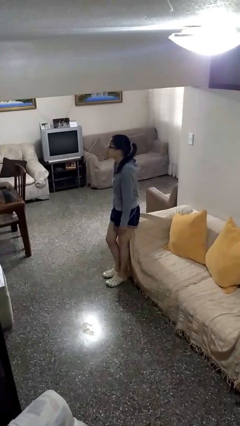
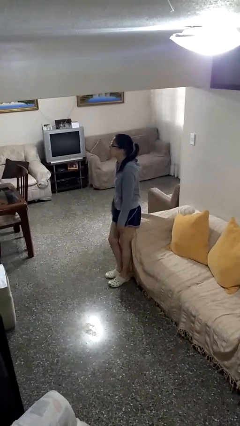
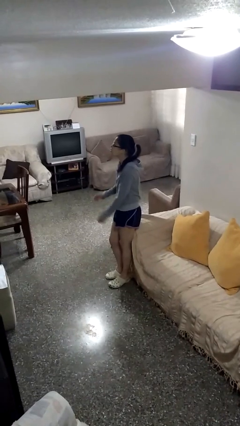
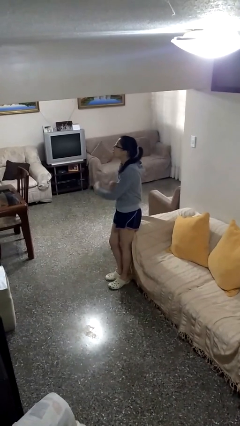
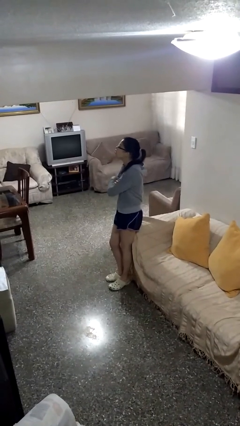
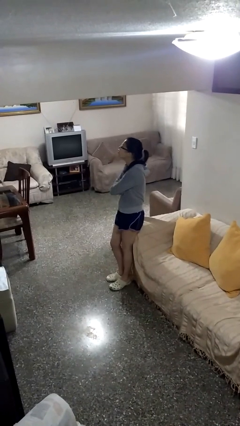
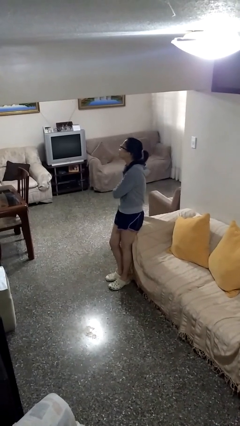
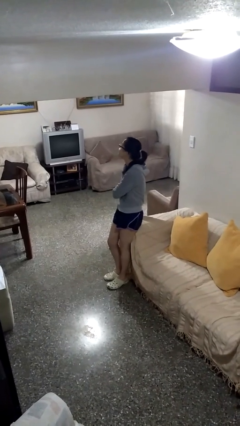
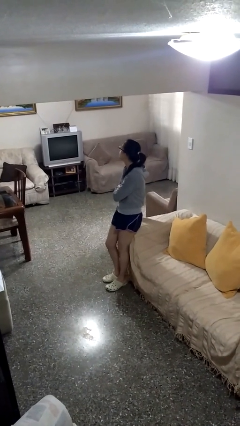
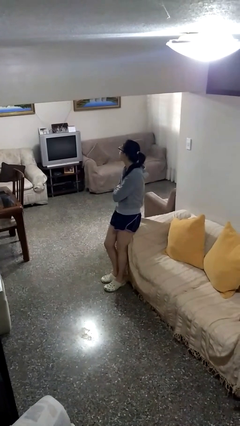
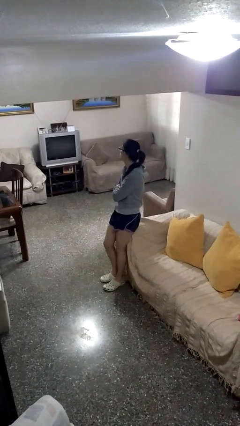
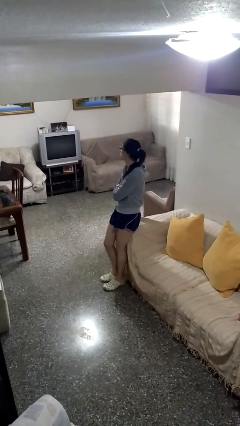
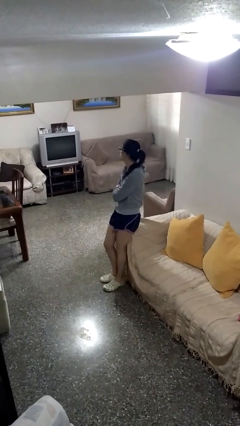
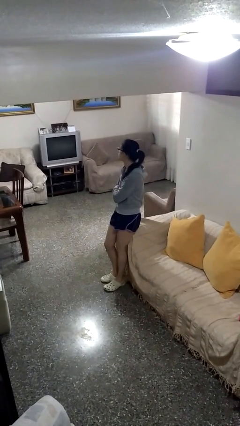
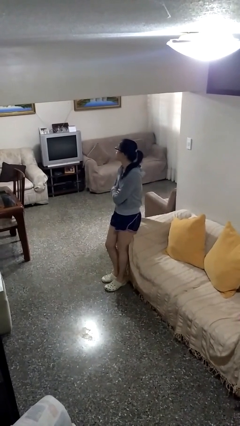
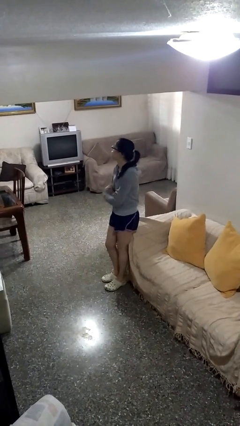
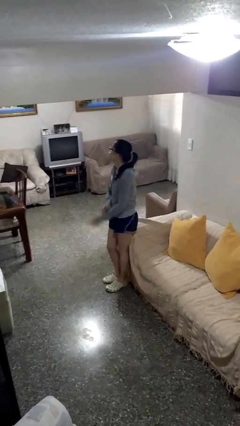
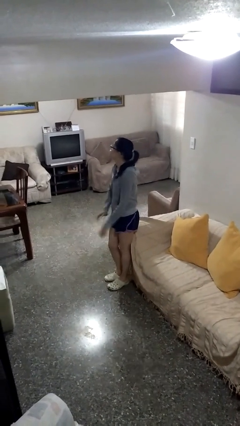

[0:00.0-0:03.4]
person crosses arms

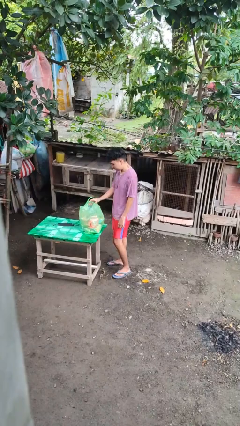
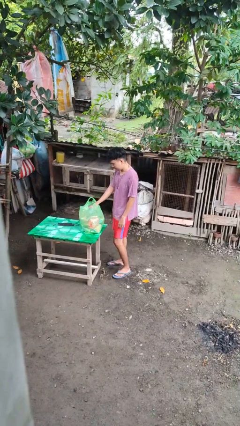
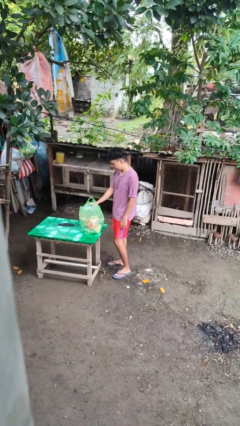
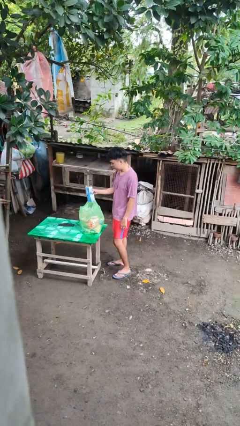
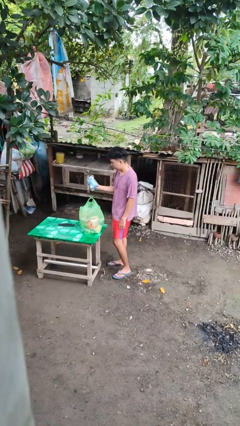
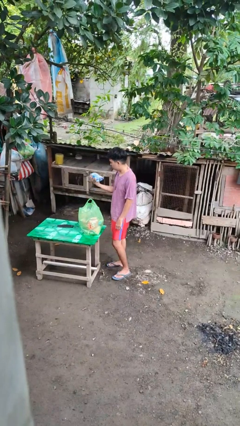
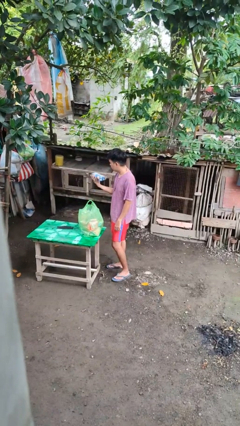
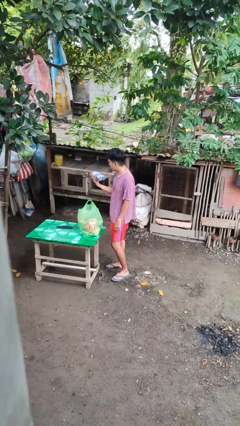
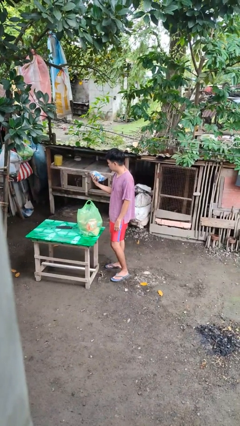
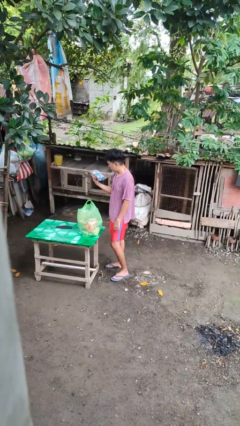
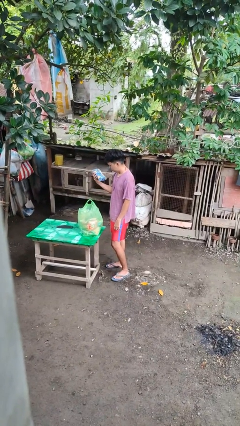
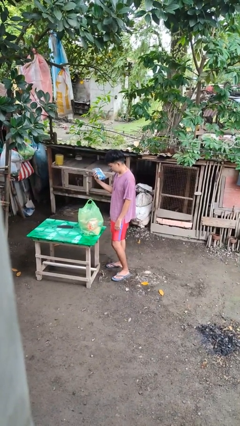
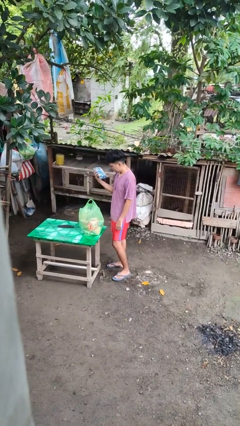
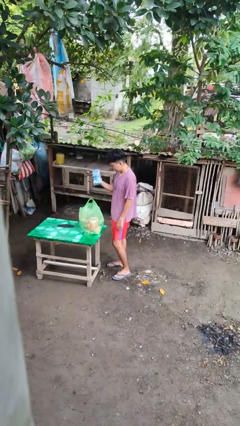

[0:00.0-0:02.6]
person takes object from bag

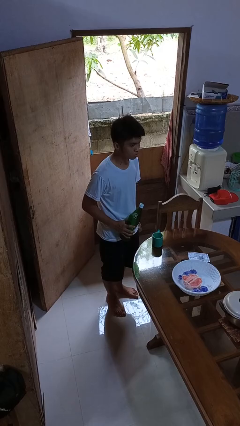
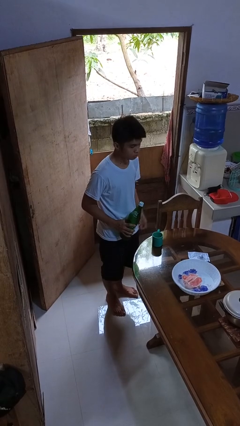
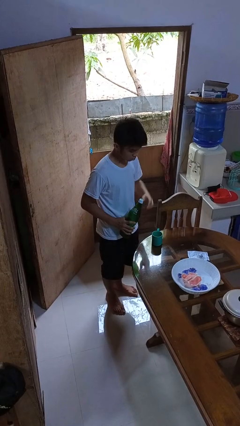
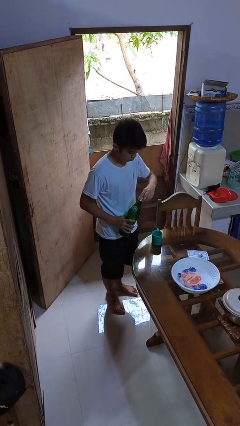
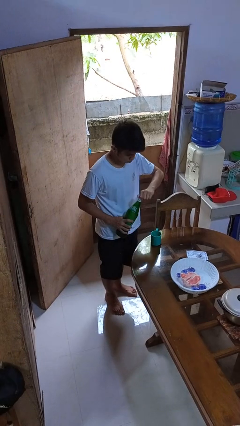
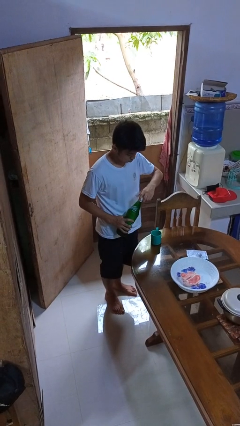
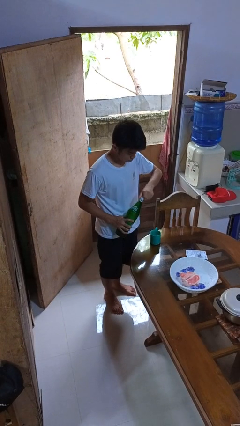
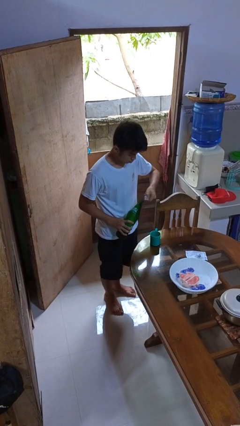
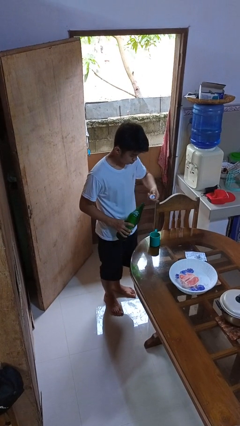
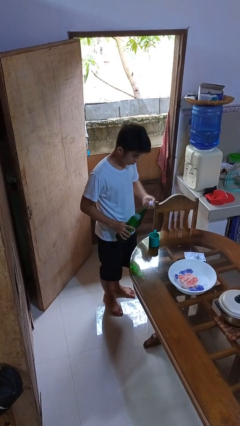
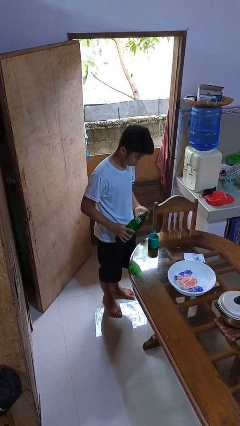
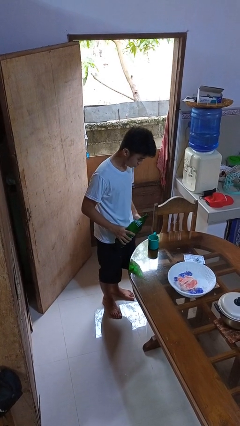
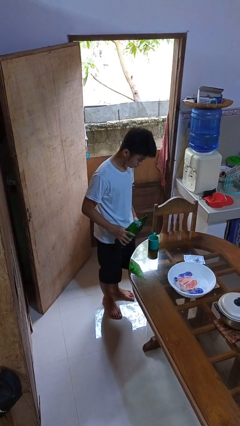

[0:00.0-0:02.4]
person unscrews lid from bottle

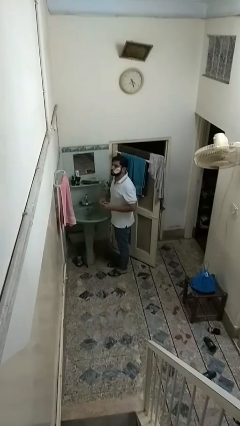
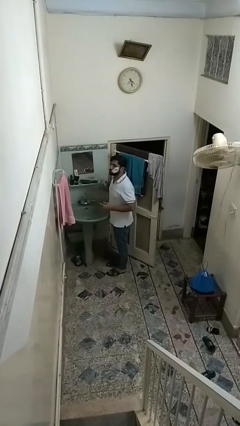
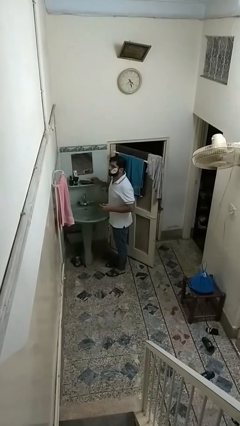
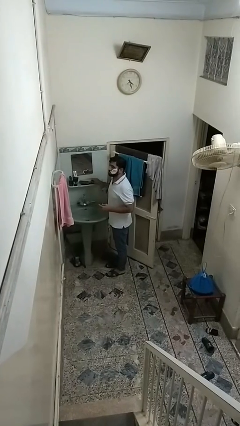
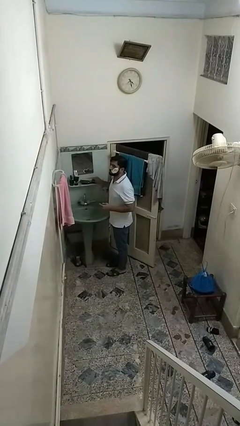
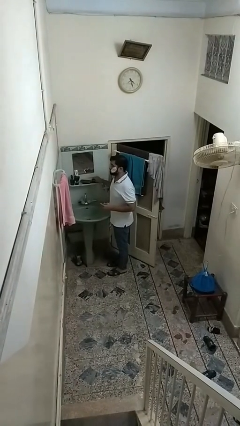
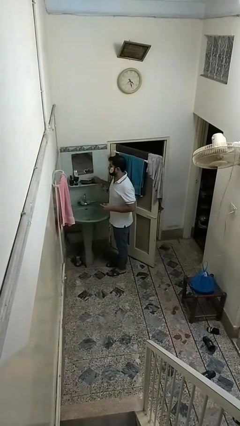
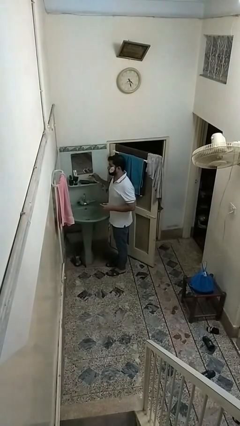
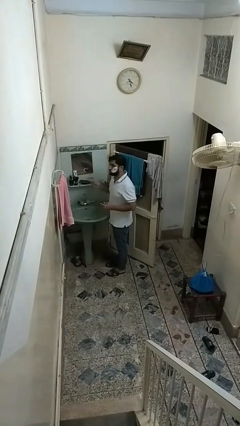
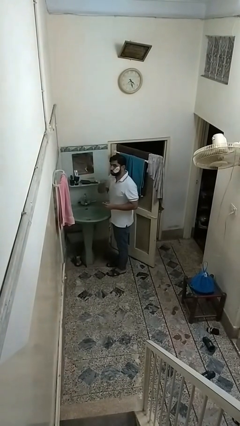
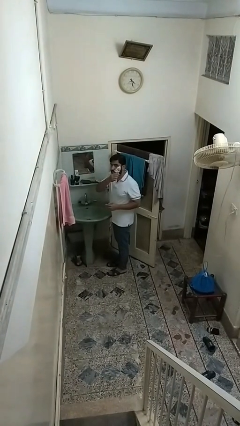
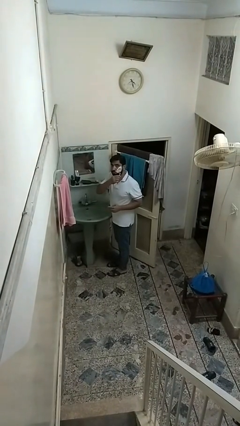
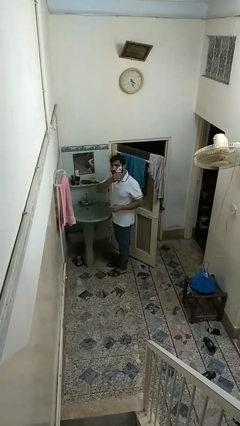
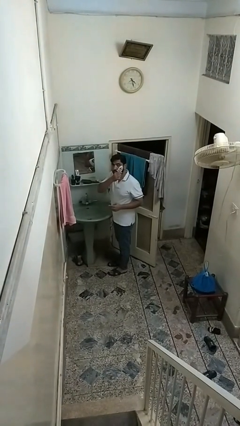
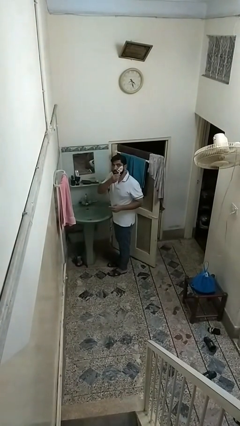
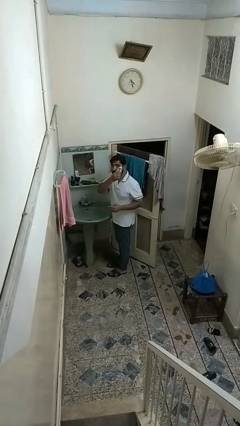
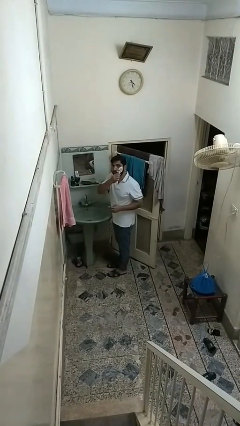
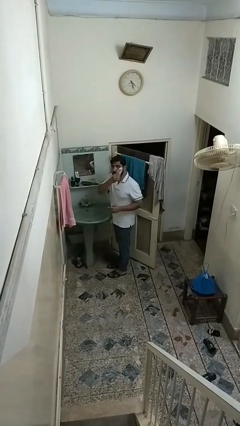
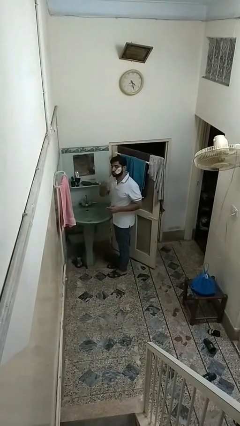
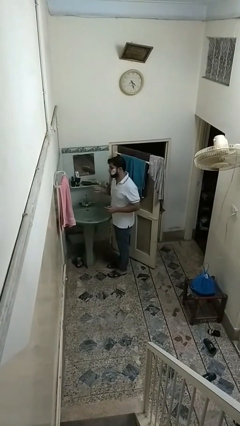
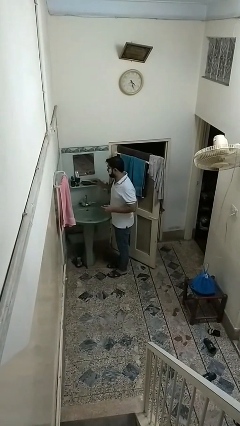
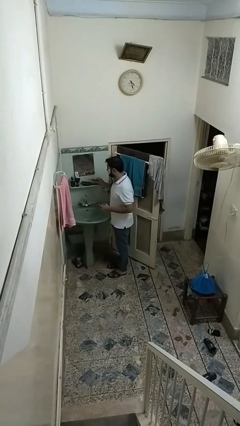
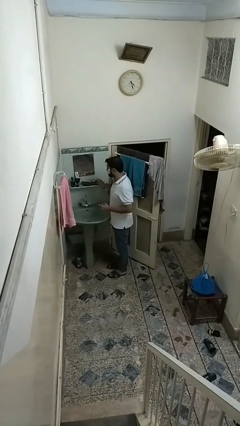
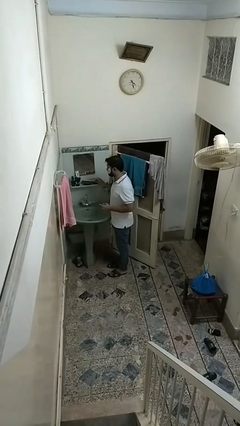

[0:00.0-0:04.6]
person shaves face

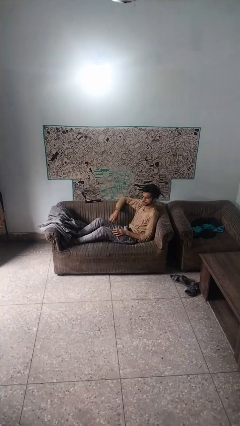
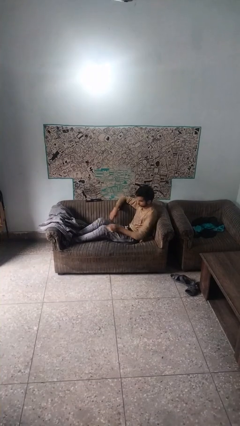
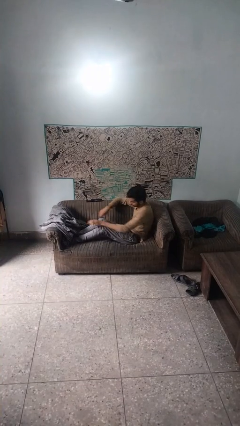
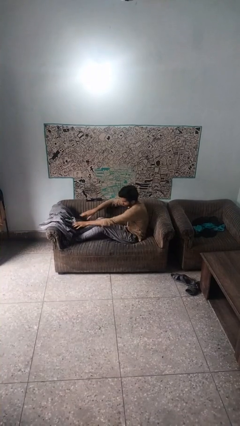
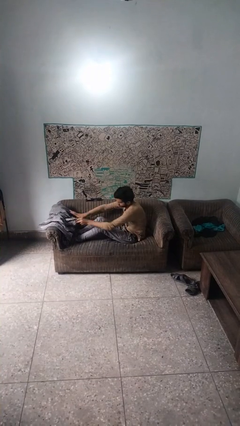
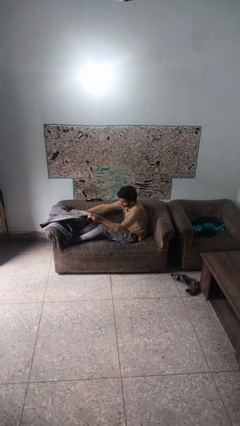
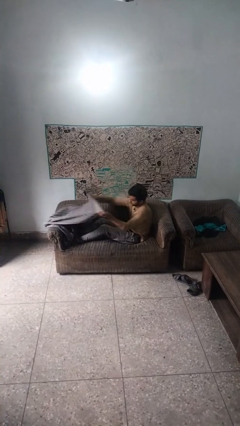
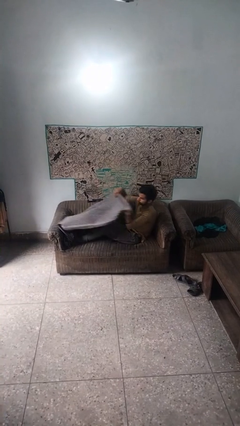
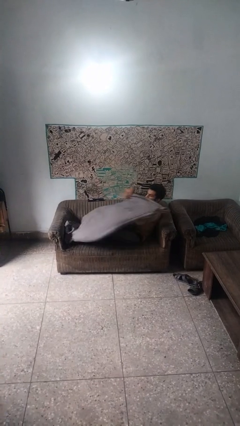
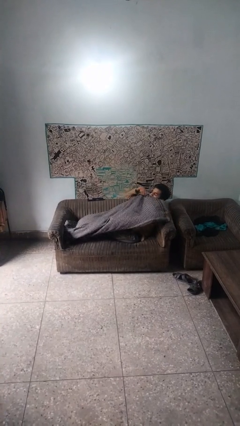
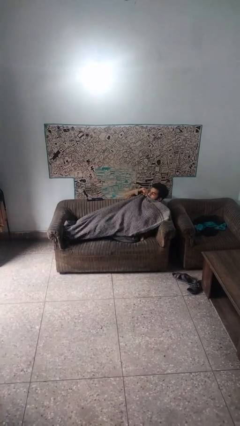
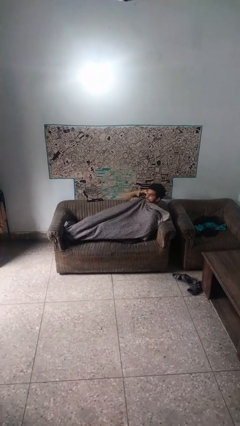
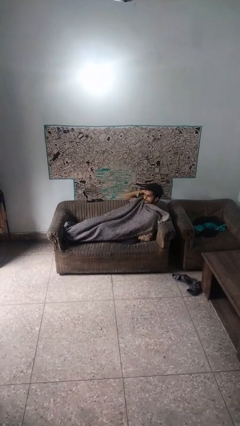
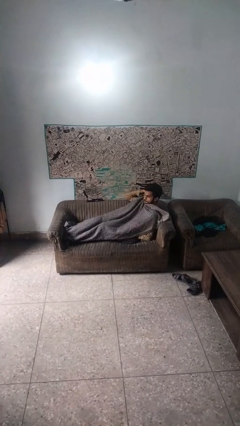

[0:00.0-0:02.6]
person covers with blanket

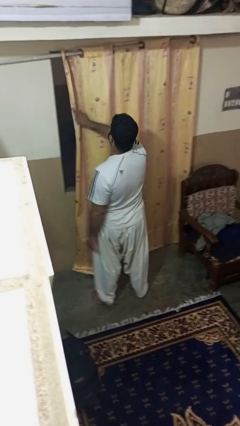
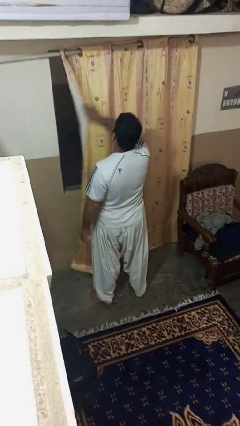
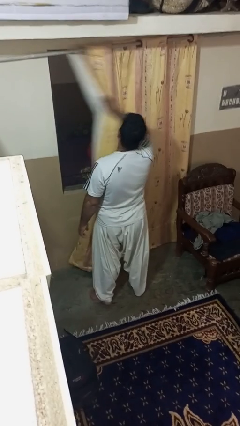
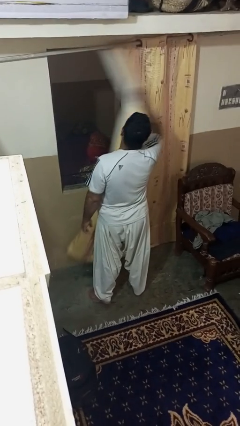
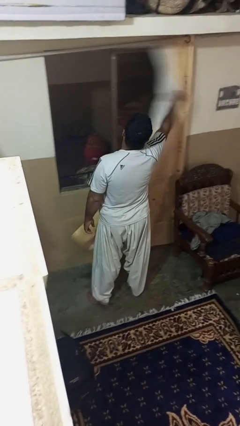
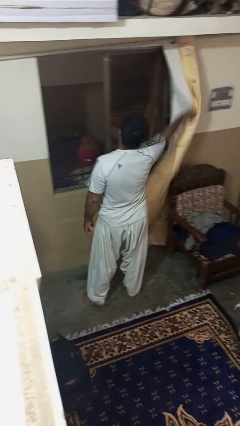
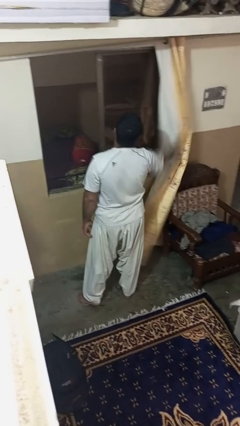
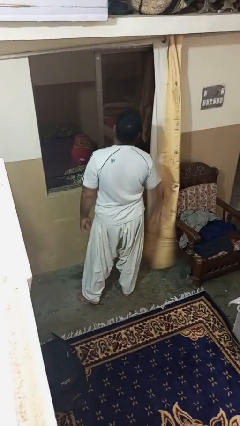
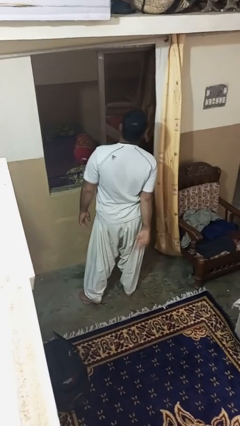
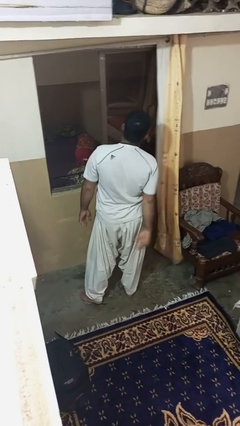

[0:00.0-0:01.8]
person opens curtains
